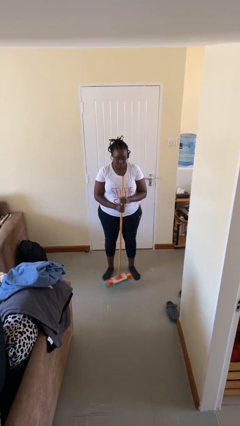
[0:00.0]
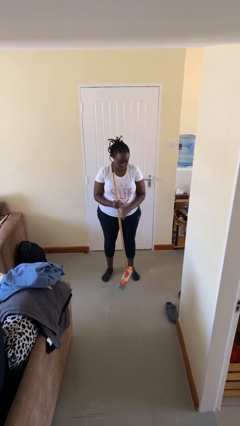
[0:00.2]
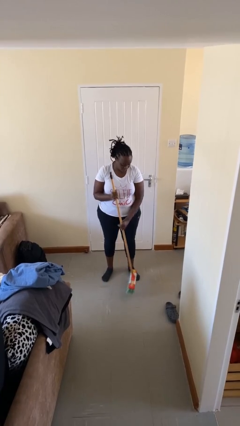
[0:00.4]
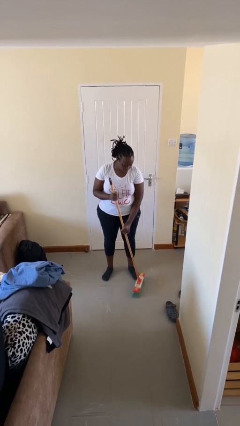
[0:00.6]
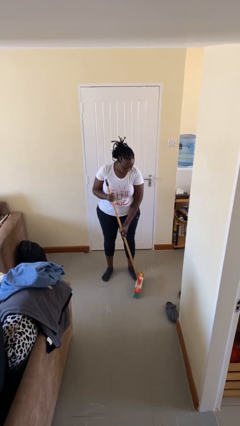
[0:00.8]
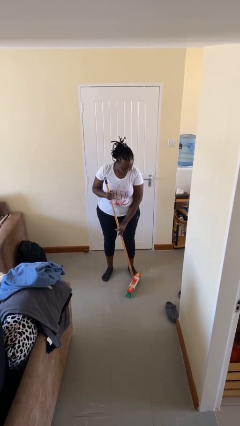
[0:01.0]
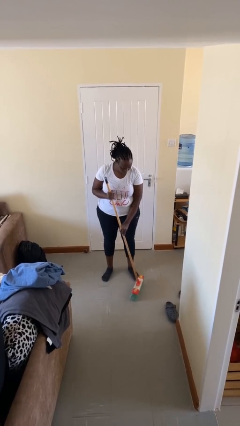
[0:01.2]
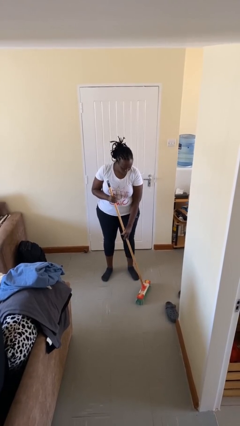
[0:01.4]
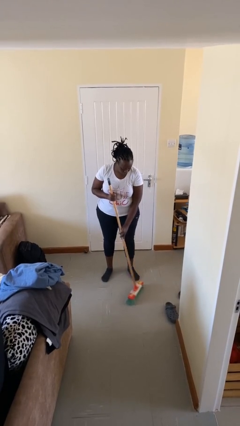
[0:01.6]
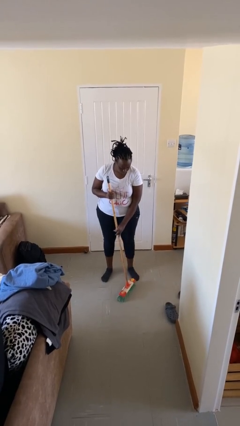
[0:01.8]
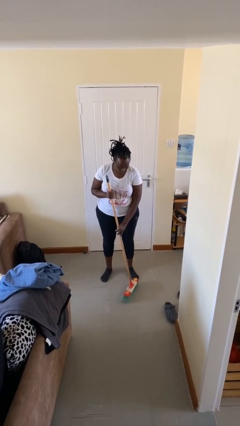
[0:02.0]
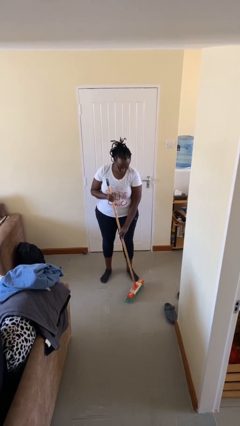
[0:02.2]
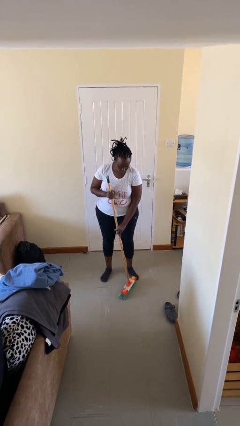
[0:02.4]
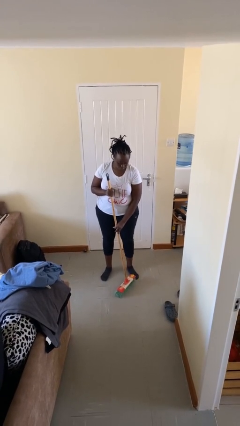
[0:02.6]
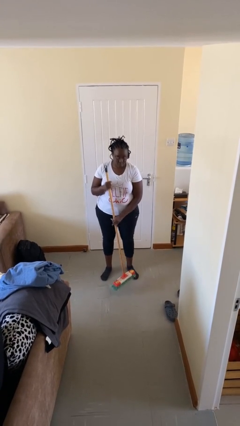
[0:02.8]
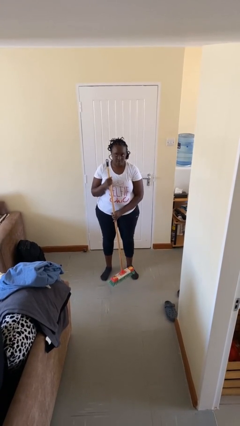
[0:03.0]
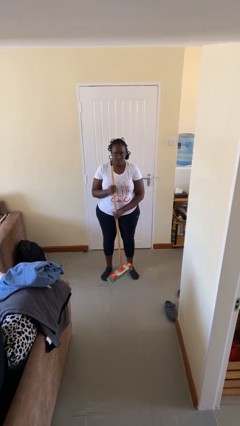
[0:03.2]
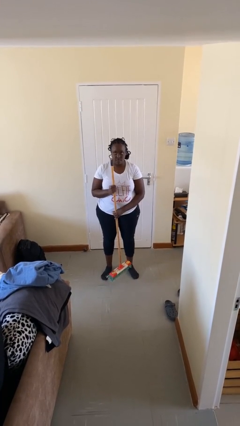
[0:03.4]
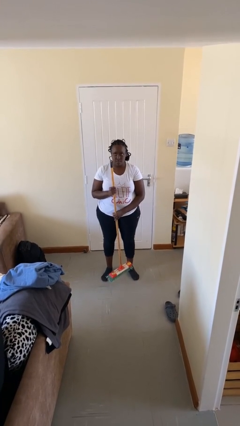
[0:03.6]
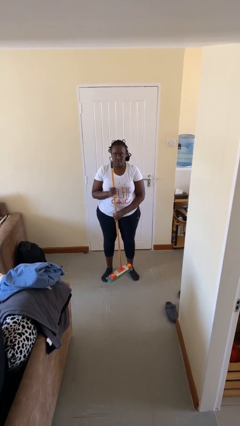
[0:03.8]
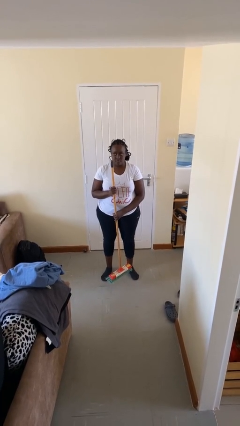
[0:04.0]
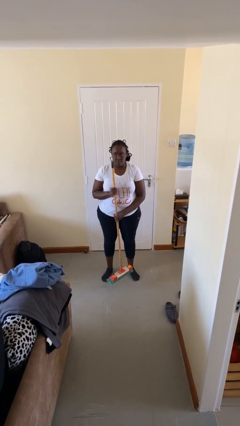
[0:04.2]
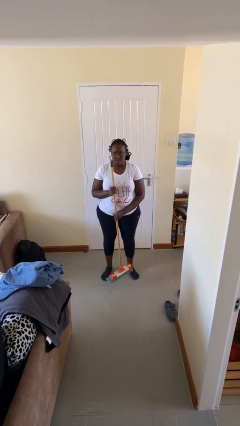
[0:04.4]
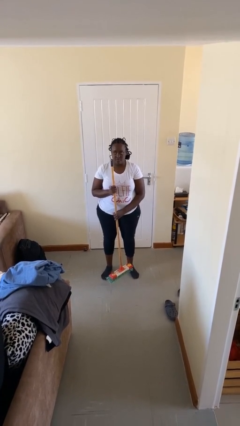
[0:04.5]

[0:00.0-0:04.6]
person sweeps floor

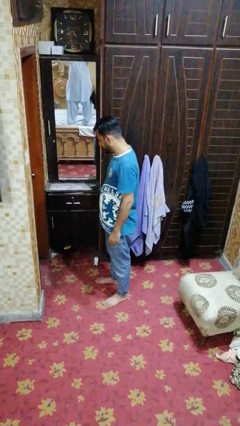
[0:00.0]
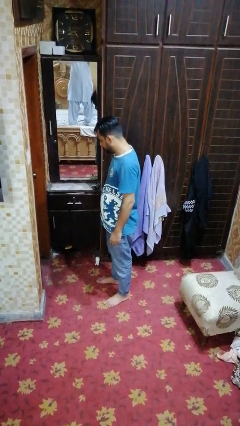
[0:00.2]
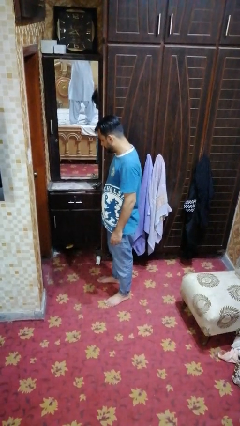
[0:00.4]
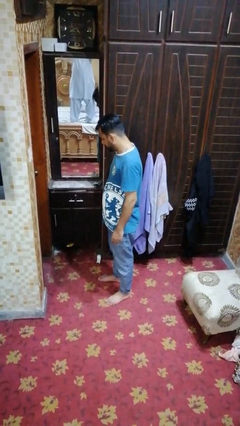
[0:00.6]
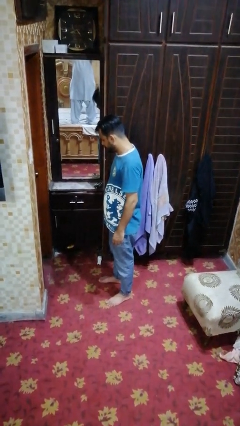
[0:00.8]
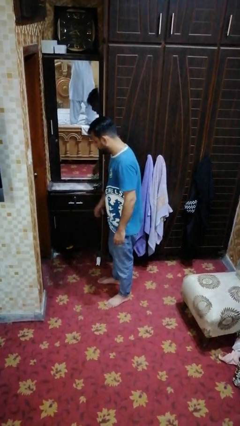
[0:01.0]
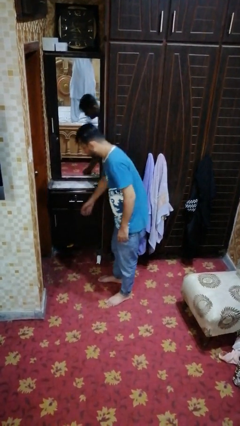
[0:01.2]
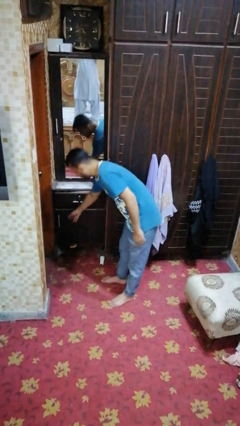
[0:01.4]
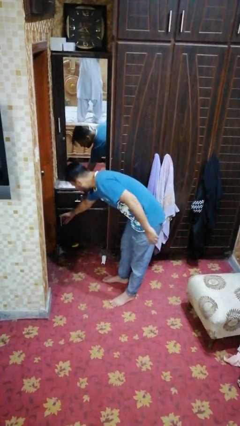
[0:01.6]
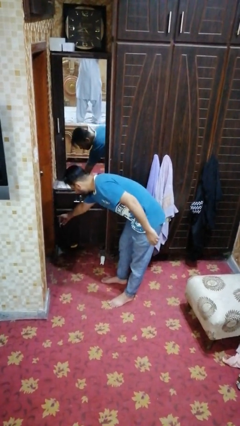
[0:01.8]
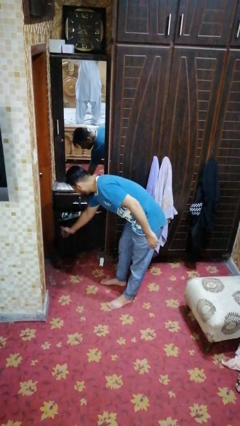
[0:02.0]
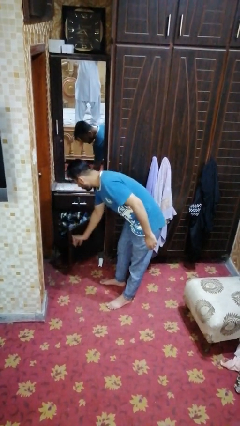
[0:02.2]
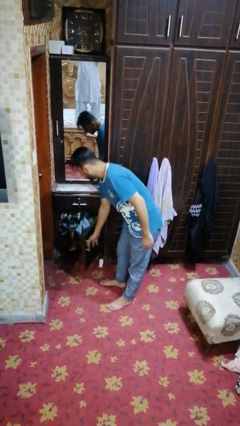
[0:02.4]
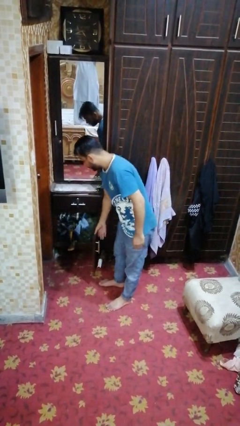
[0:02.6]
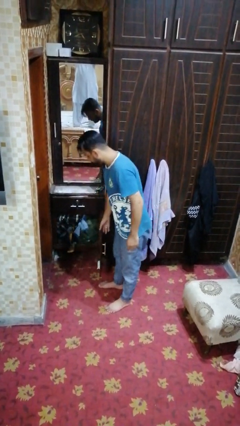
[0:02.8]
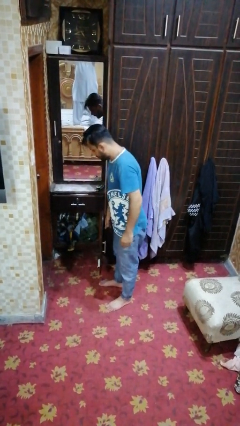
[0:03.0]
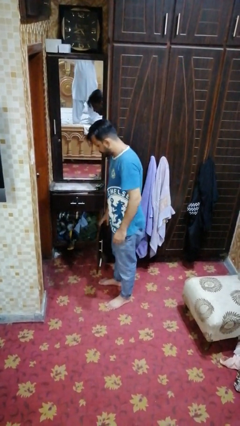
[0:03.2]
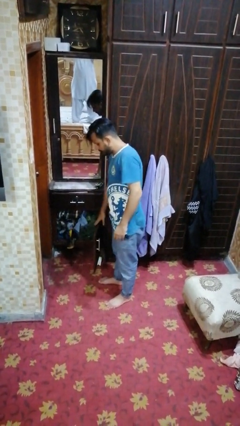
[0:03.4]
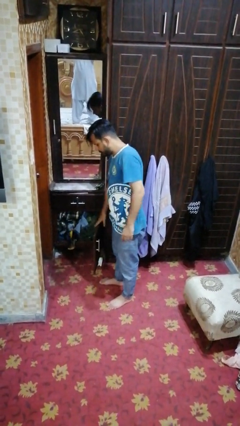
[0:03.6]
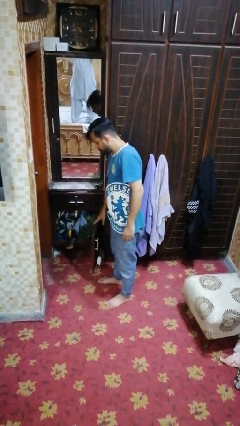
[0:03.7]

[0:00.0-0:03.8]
person opens dresser drawer

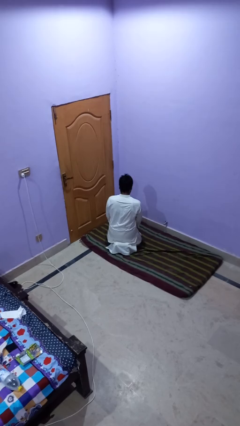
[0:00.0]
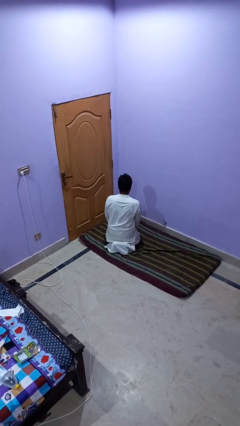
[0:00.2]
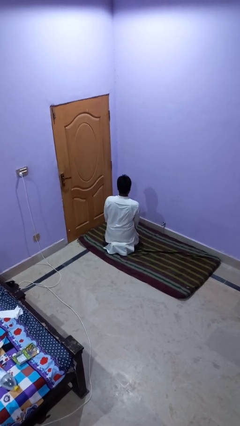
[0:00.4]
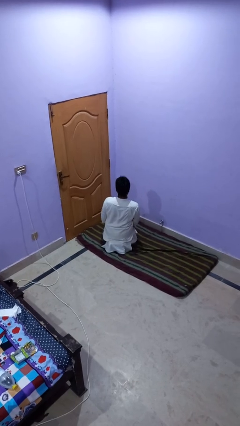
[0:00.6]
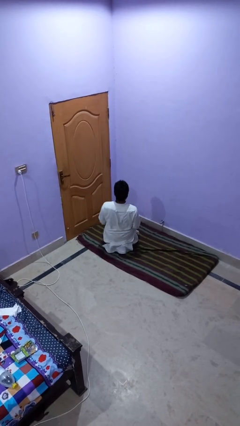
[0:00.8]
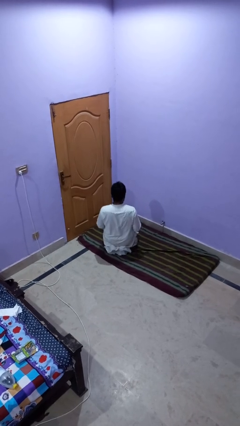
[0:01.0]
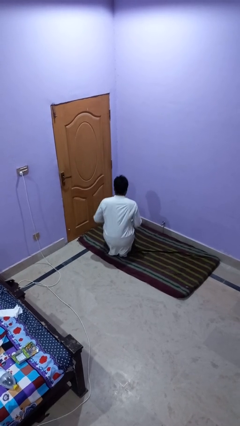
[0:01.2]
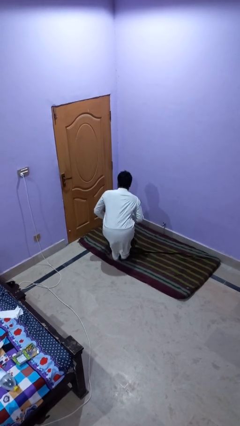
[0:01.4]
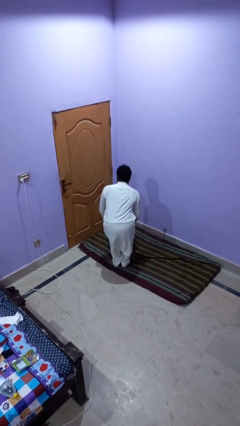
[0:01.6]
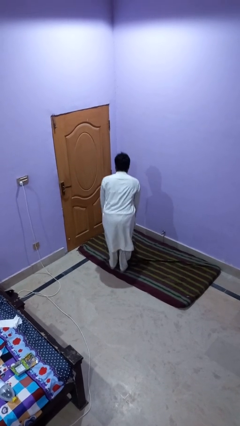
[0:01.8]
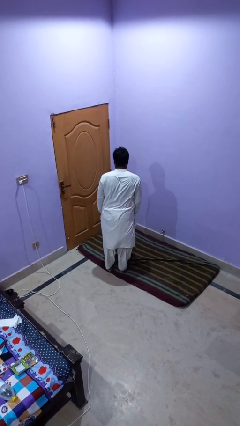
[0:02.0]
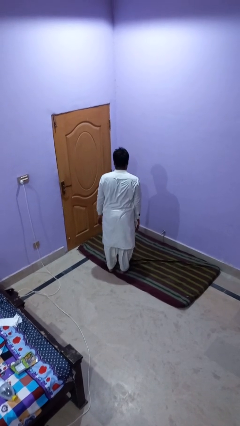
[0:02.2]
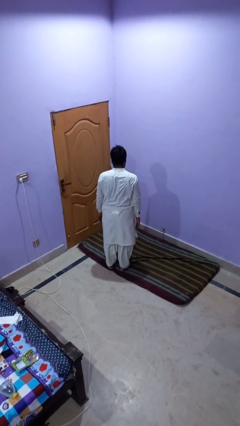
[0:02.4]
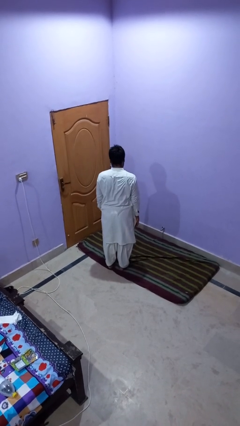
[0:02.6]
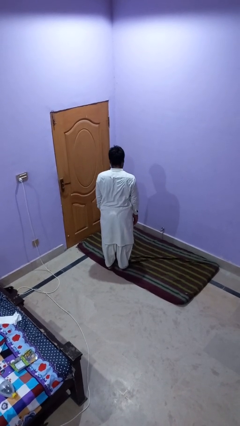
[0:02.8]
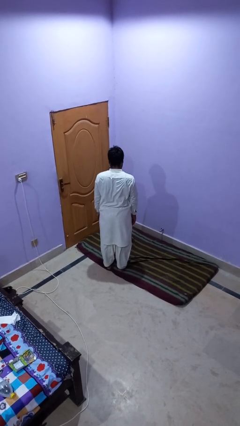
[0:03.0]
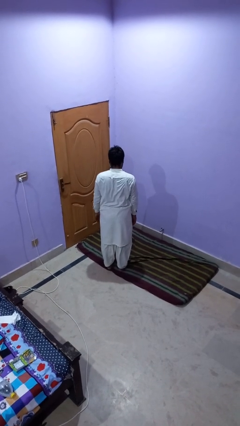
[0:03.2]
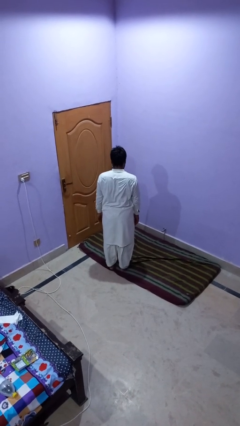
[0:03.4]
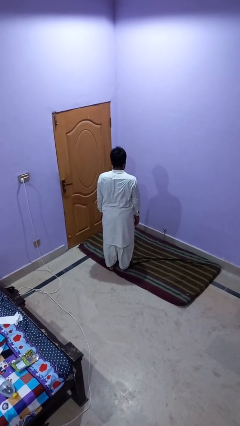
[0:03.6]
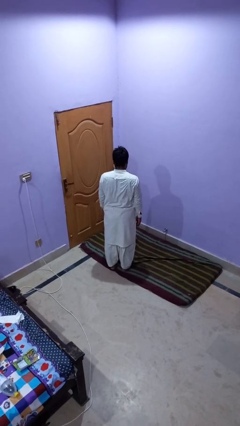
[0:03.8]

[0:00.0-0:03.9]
person stands up from floor

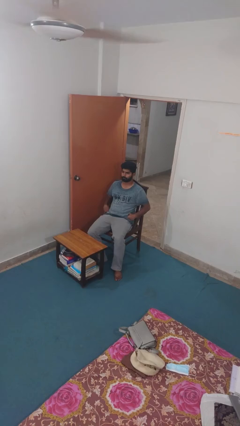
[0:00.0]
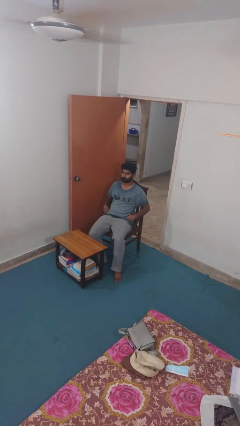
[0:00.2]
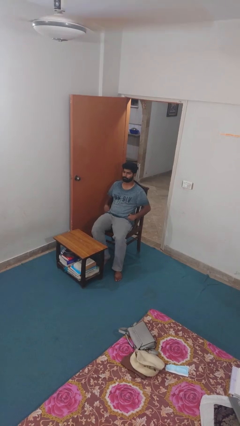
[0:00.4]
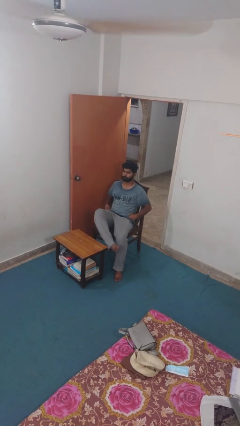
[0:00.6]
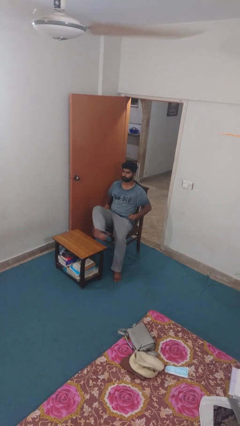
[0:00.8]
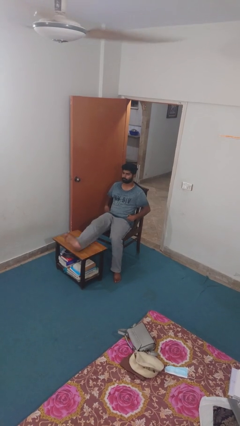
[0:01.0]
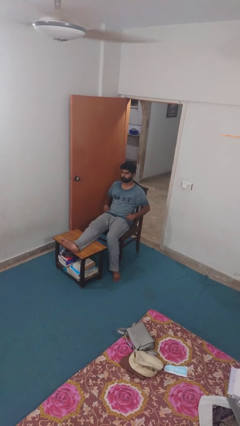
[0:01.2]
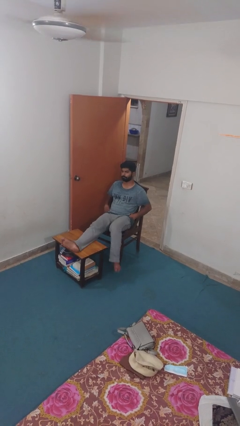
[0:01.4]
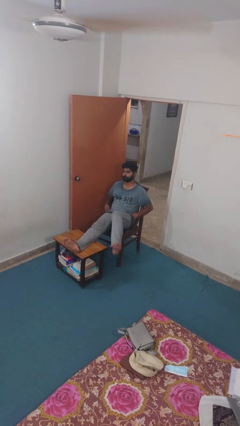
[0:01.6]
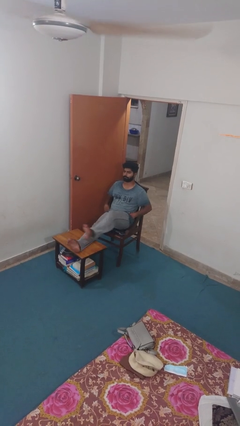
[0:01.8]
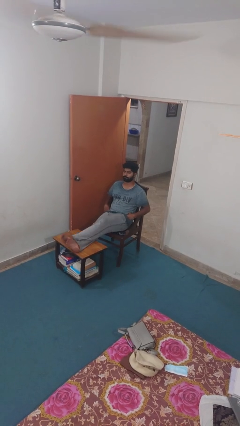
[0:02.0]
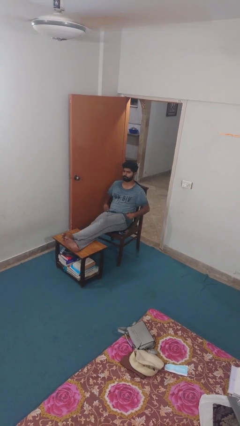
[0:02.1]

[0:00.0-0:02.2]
person puts feet up

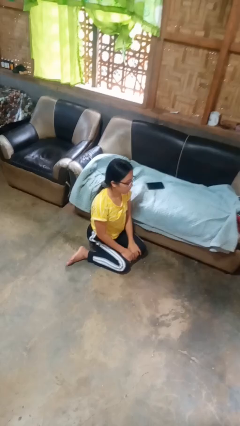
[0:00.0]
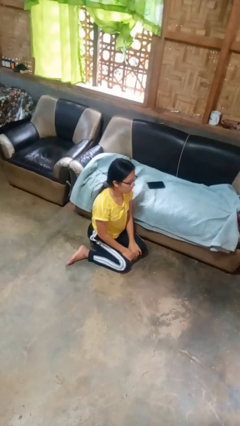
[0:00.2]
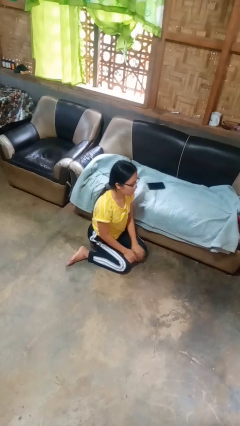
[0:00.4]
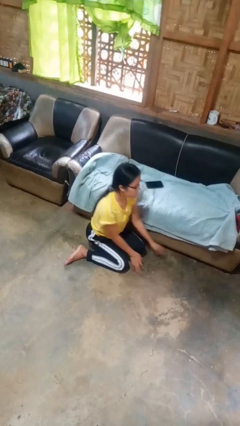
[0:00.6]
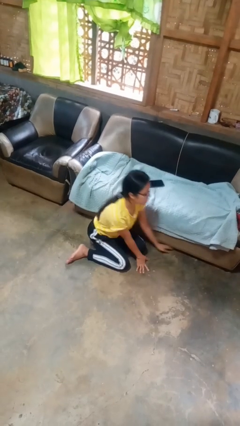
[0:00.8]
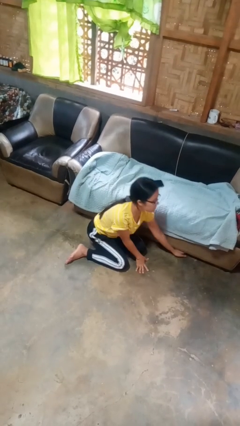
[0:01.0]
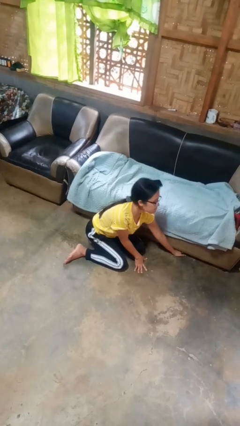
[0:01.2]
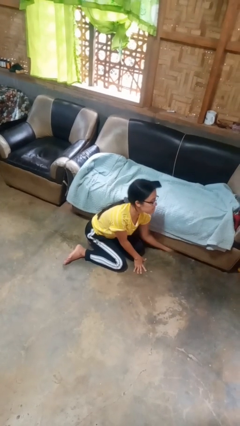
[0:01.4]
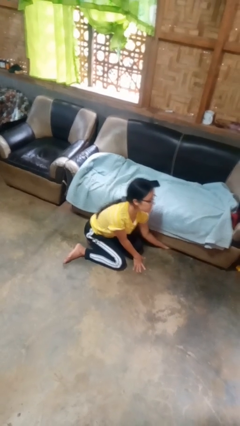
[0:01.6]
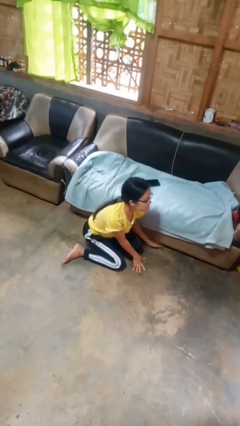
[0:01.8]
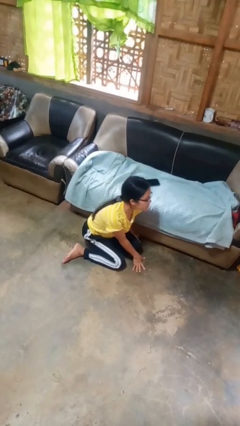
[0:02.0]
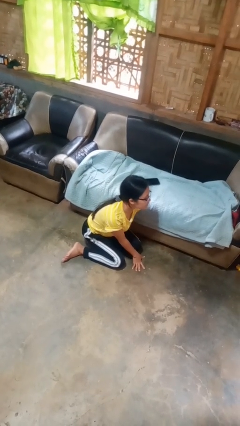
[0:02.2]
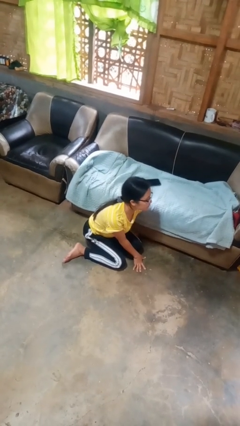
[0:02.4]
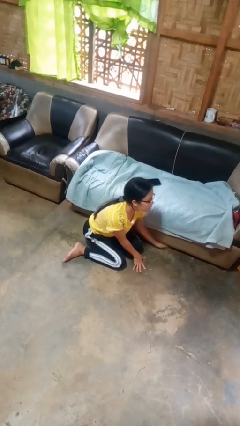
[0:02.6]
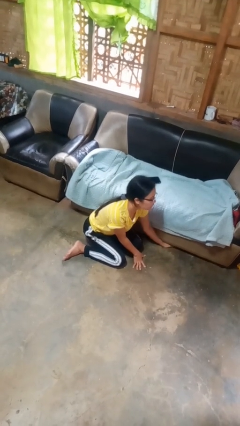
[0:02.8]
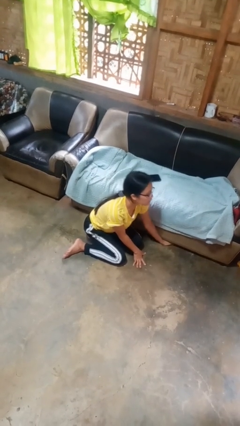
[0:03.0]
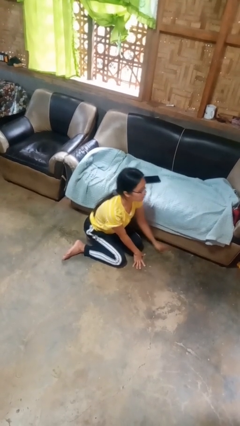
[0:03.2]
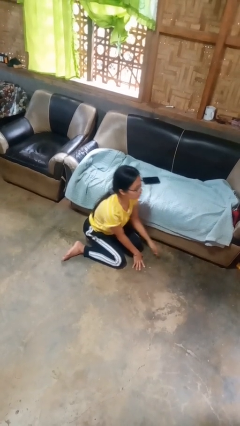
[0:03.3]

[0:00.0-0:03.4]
person searches under couch
